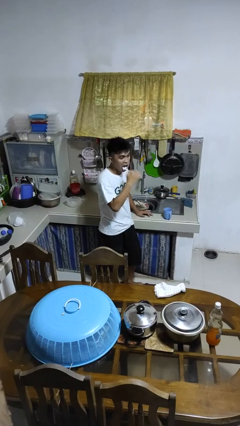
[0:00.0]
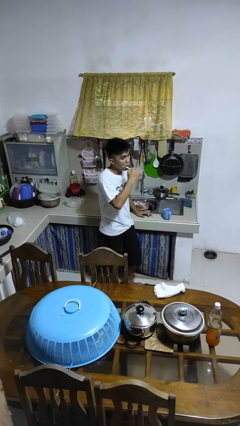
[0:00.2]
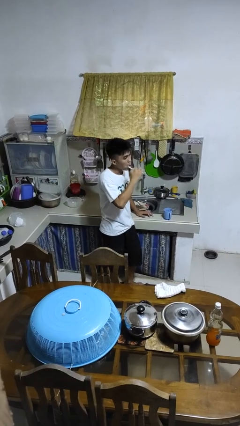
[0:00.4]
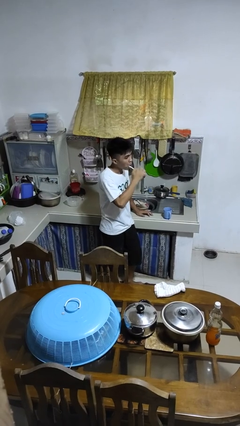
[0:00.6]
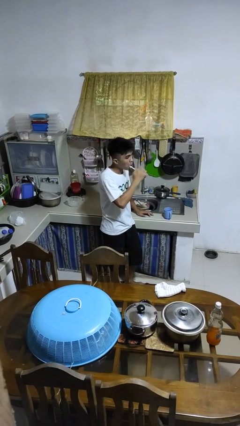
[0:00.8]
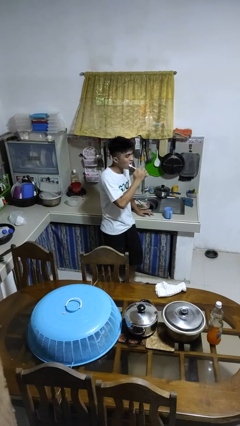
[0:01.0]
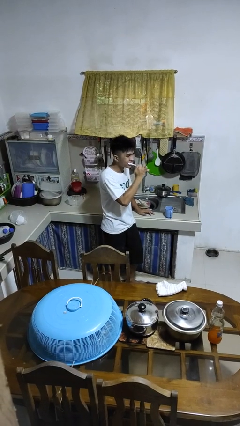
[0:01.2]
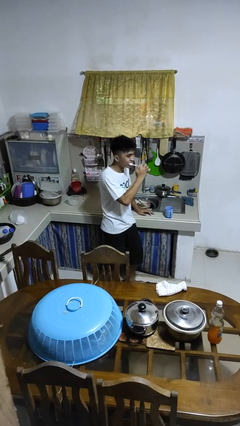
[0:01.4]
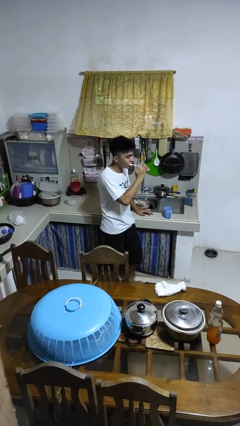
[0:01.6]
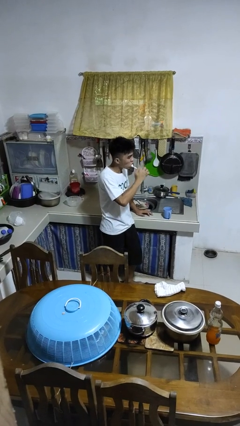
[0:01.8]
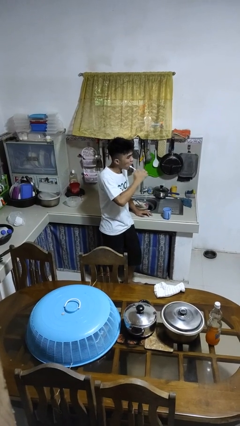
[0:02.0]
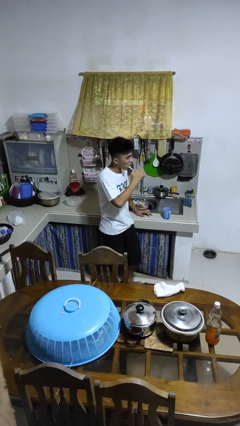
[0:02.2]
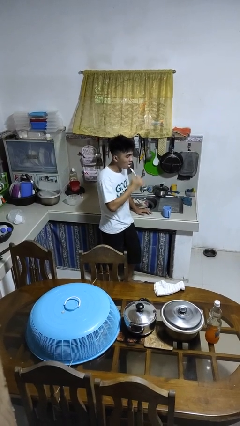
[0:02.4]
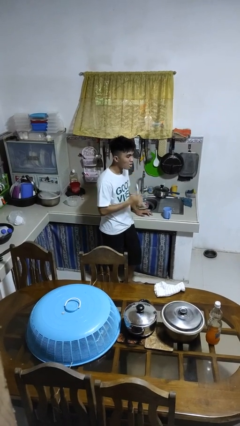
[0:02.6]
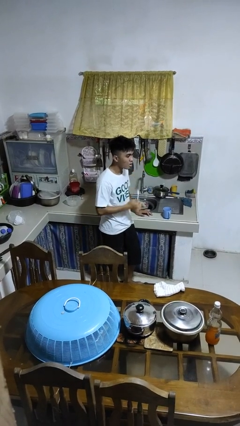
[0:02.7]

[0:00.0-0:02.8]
person brushes teeth

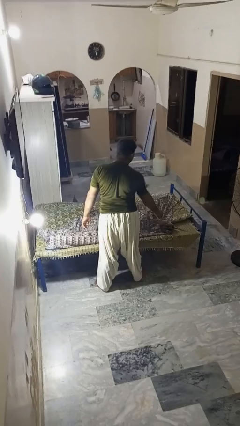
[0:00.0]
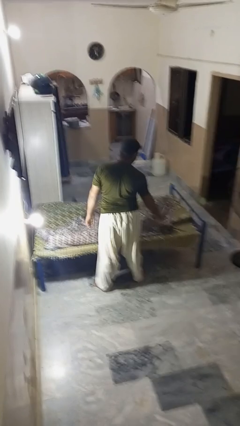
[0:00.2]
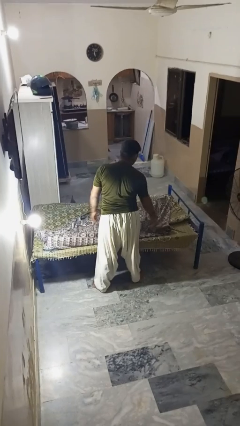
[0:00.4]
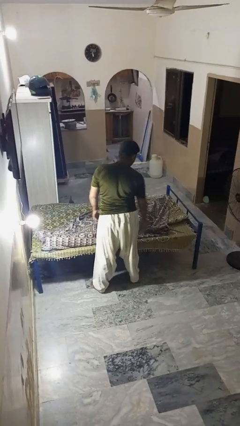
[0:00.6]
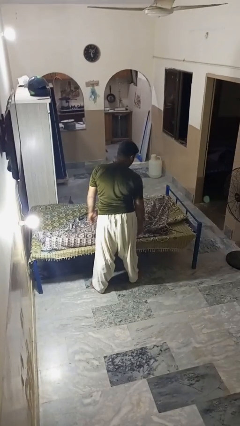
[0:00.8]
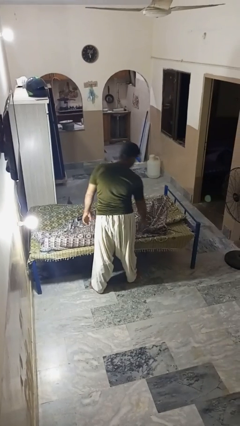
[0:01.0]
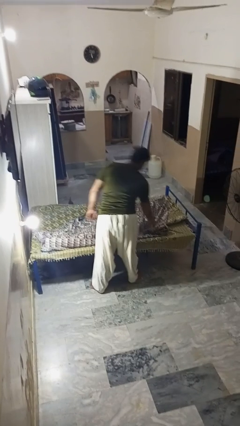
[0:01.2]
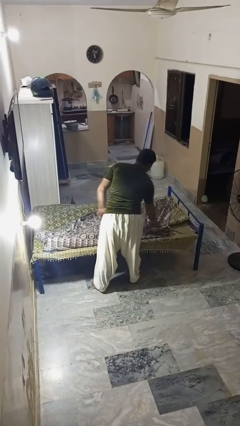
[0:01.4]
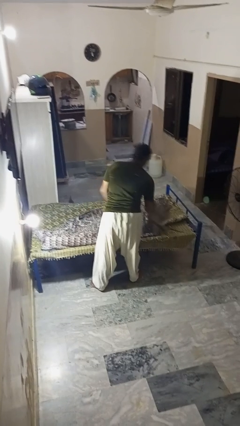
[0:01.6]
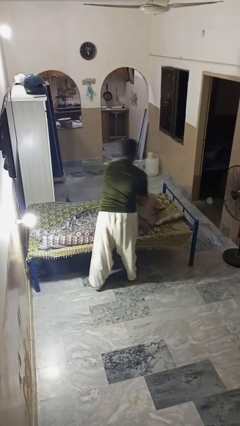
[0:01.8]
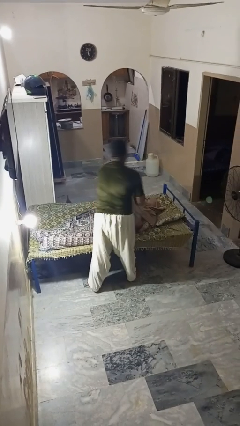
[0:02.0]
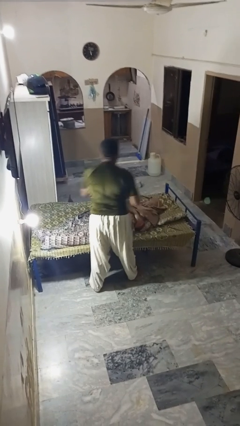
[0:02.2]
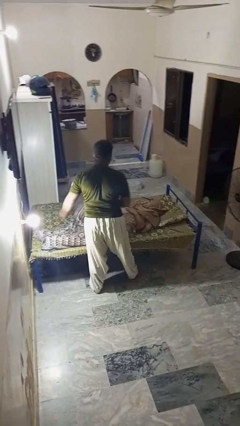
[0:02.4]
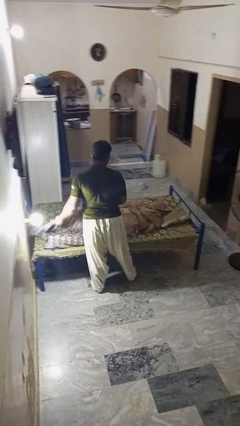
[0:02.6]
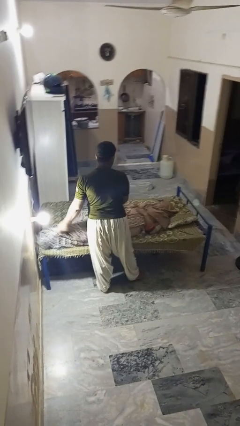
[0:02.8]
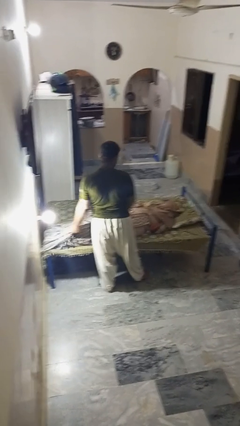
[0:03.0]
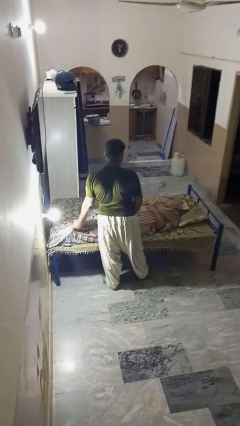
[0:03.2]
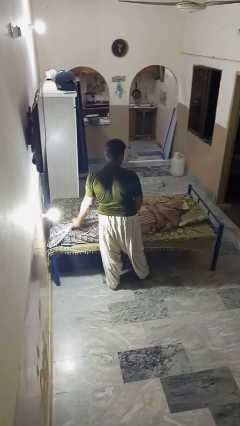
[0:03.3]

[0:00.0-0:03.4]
person uncovers friend with blanket

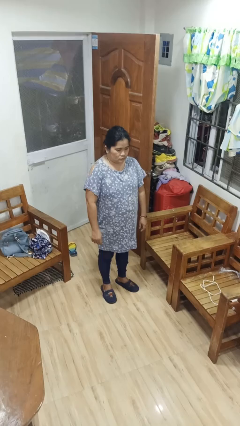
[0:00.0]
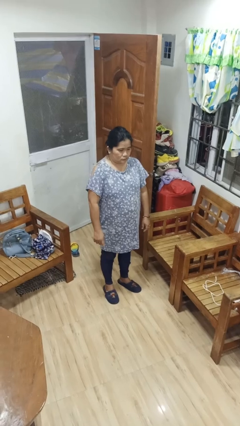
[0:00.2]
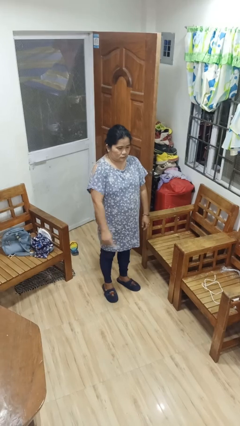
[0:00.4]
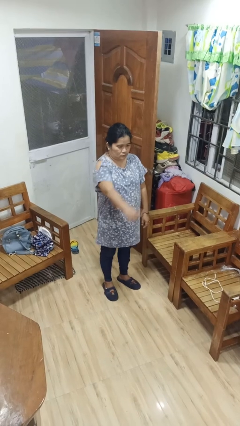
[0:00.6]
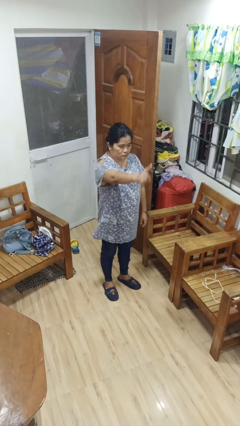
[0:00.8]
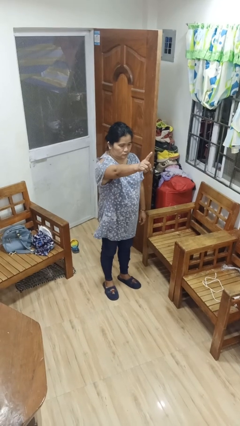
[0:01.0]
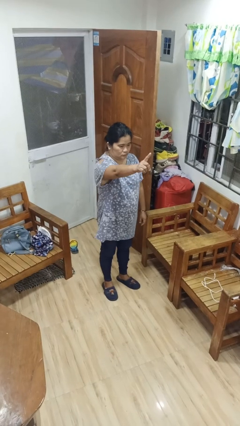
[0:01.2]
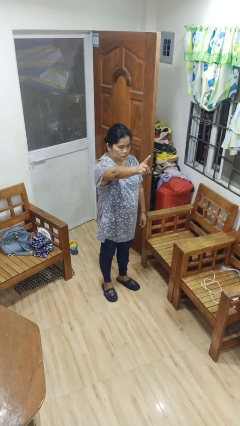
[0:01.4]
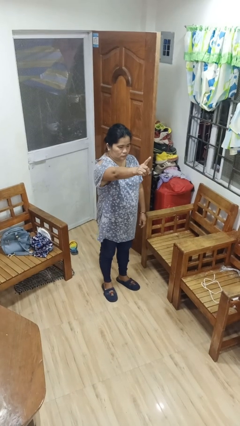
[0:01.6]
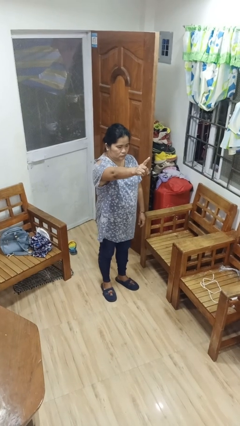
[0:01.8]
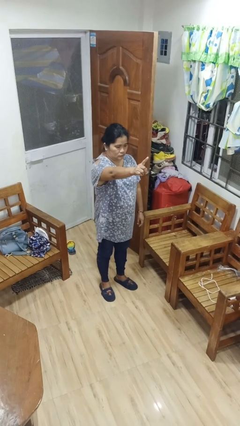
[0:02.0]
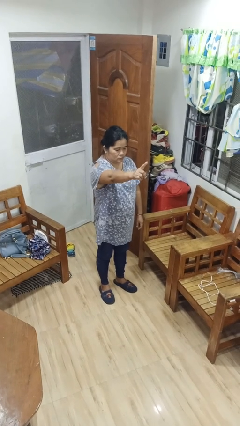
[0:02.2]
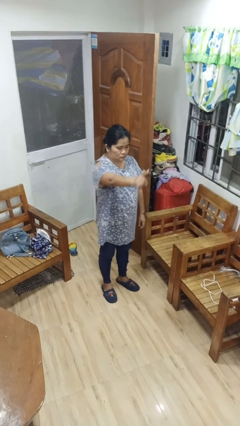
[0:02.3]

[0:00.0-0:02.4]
person gestures number one

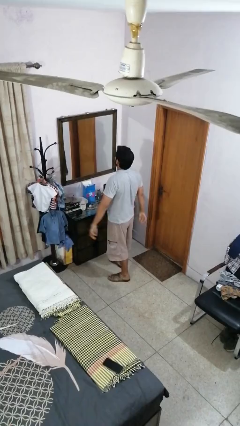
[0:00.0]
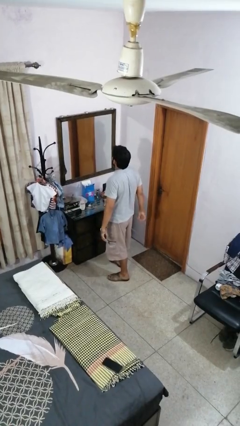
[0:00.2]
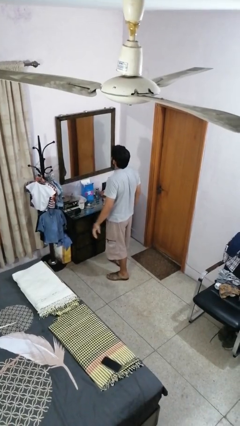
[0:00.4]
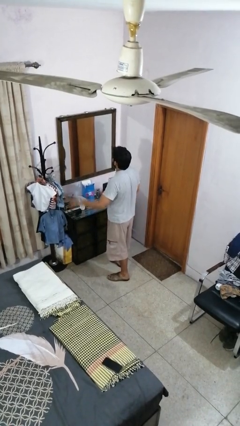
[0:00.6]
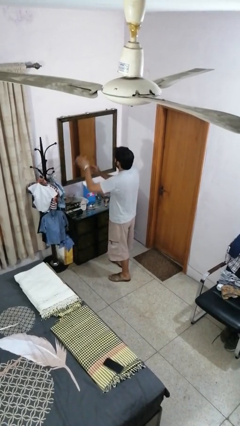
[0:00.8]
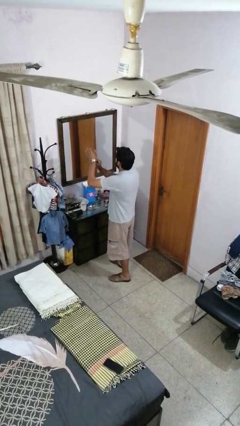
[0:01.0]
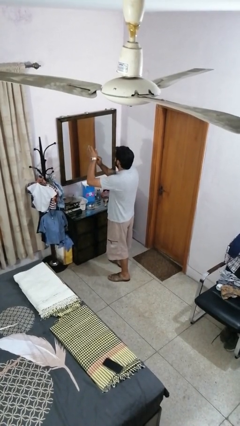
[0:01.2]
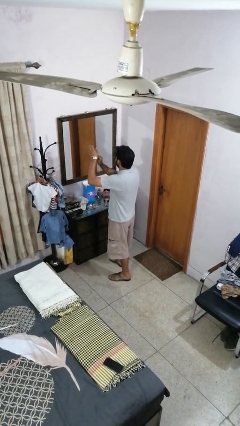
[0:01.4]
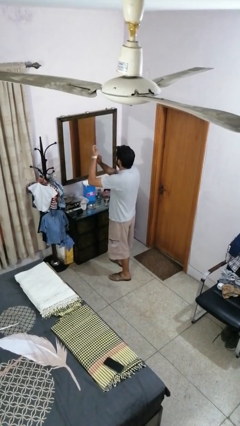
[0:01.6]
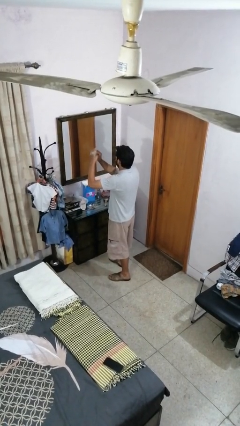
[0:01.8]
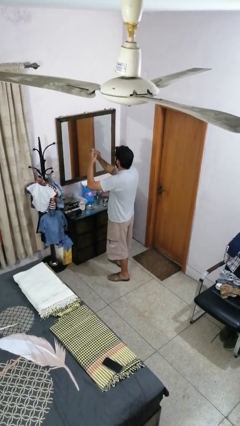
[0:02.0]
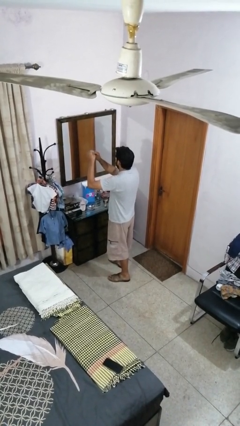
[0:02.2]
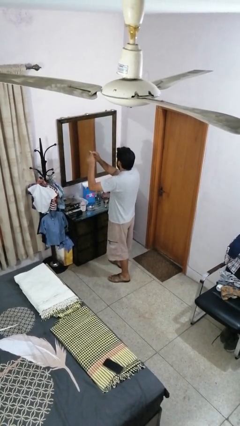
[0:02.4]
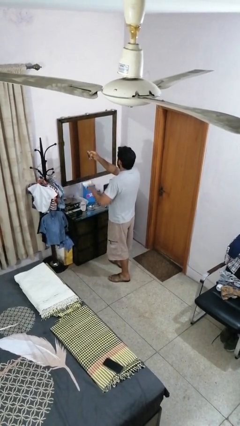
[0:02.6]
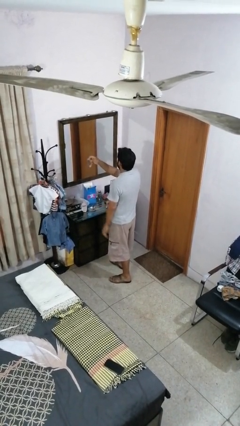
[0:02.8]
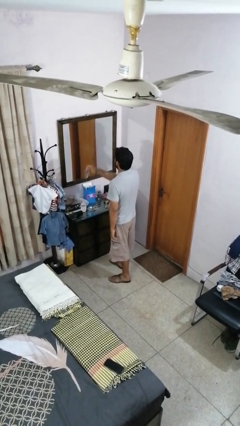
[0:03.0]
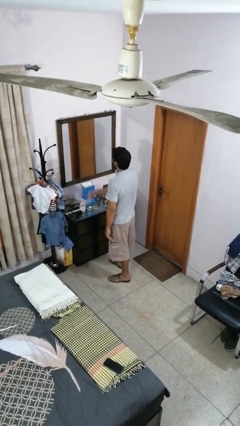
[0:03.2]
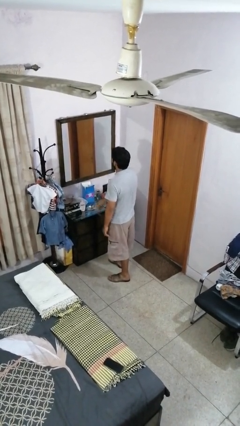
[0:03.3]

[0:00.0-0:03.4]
person takes off wristwatch

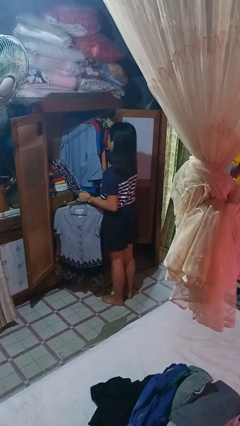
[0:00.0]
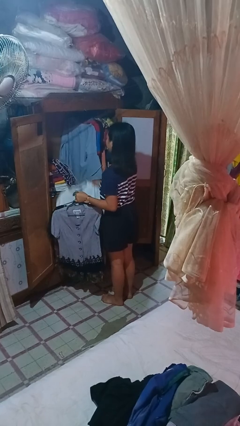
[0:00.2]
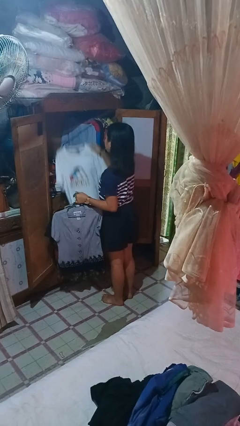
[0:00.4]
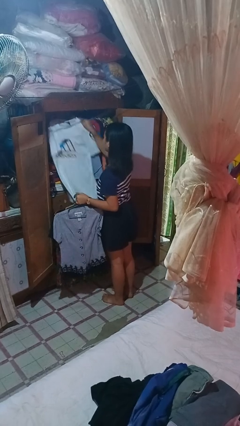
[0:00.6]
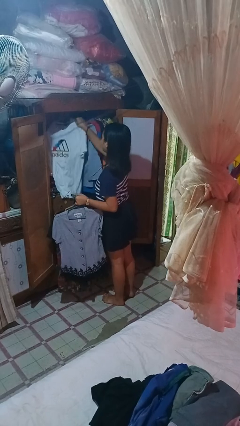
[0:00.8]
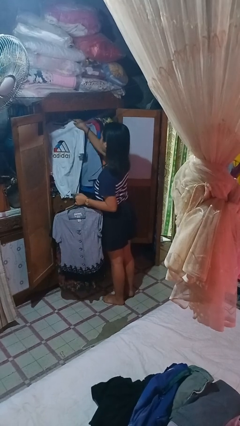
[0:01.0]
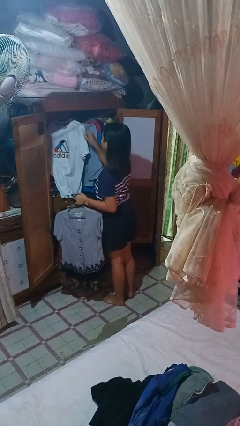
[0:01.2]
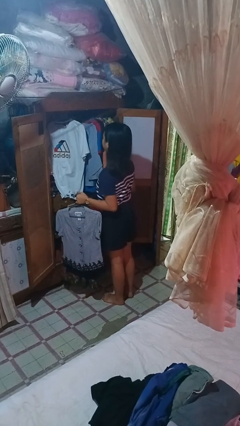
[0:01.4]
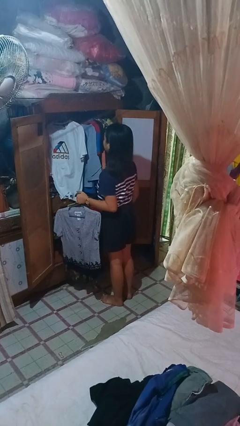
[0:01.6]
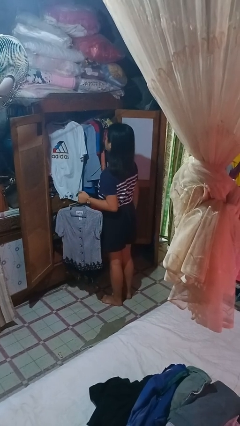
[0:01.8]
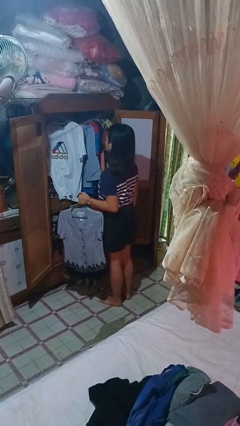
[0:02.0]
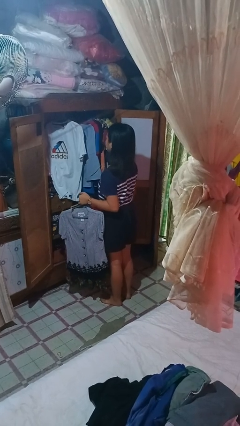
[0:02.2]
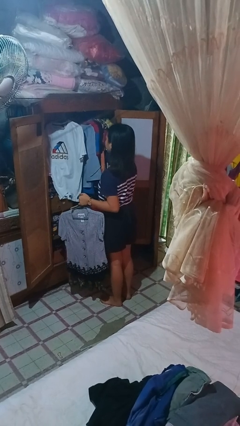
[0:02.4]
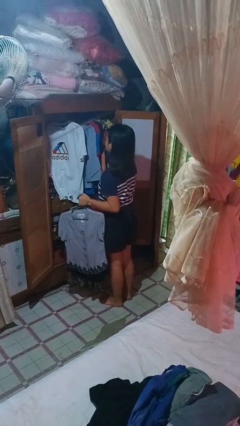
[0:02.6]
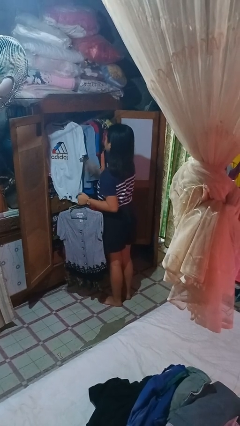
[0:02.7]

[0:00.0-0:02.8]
person puts clothes into closet

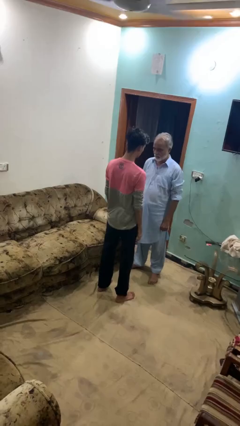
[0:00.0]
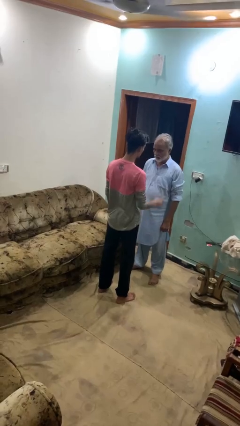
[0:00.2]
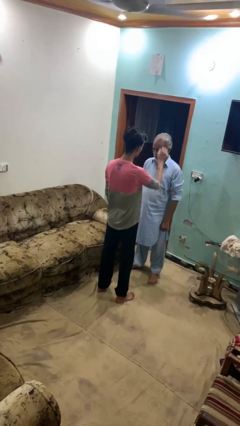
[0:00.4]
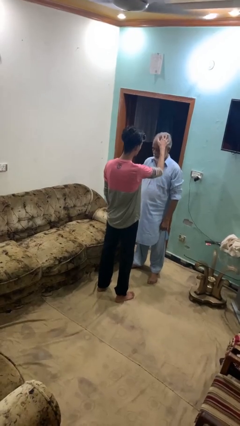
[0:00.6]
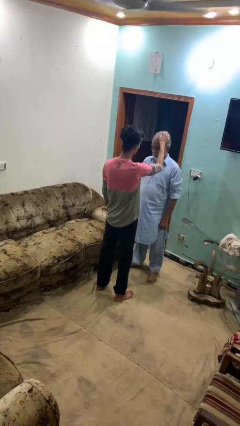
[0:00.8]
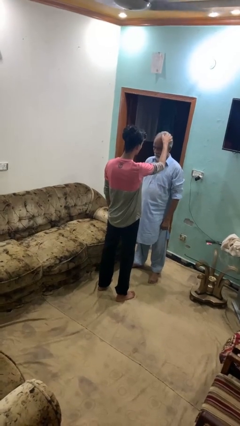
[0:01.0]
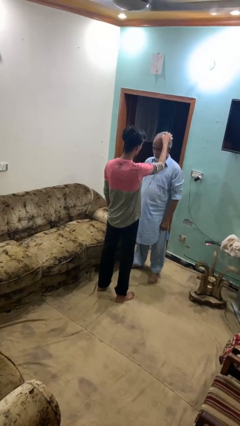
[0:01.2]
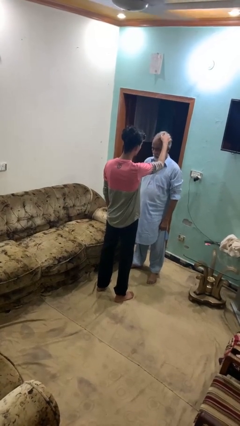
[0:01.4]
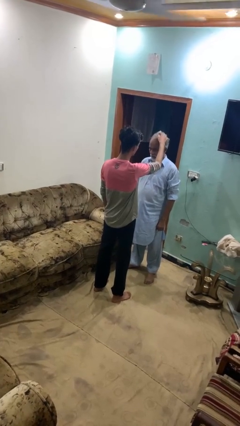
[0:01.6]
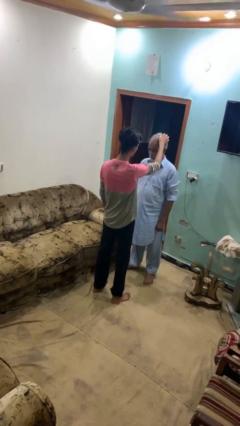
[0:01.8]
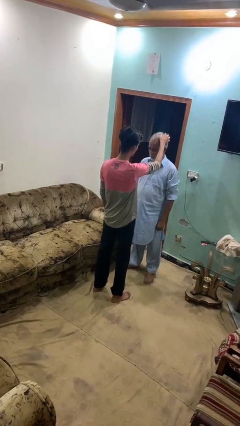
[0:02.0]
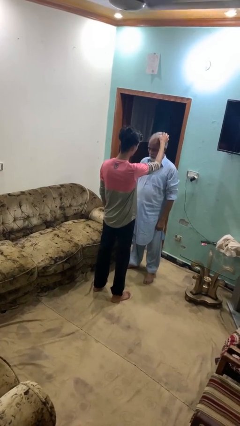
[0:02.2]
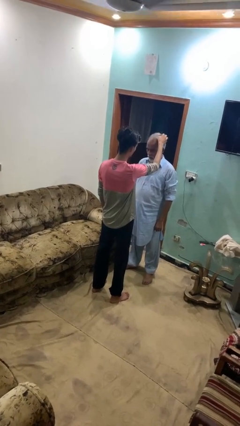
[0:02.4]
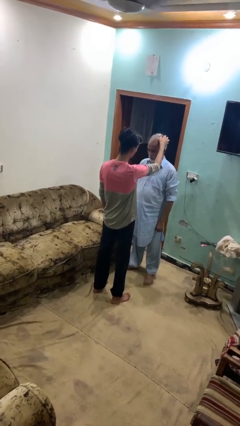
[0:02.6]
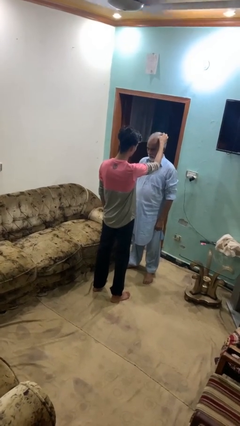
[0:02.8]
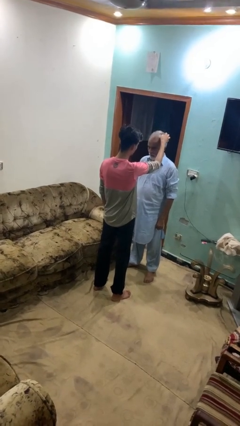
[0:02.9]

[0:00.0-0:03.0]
person grabs person by hair
